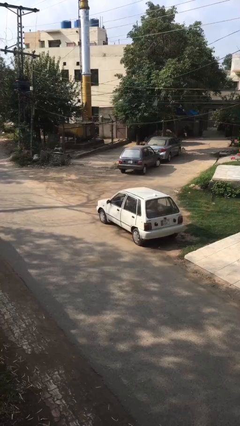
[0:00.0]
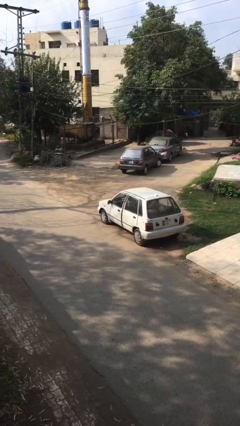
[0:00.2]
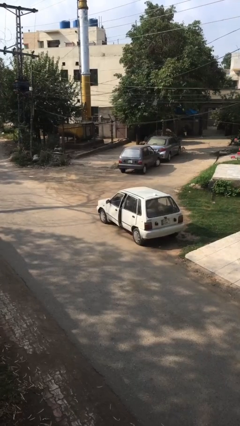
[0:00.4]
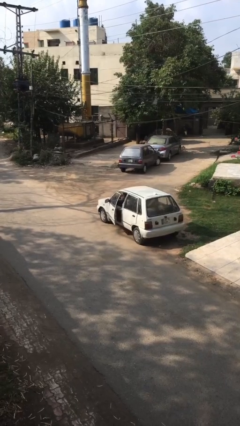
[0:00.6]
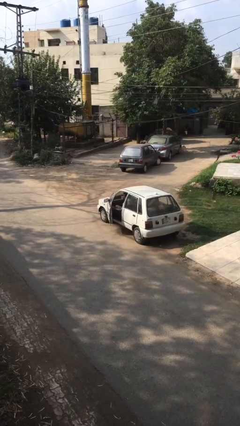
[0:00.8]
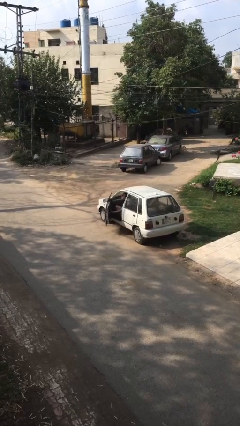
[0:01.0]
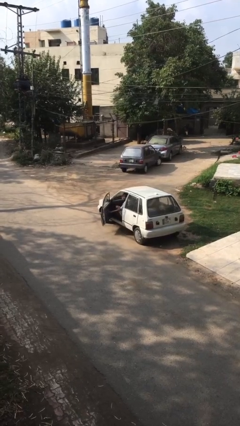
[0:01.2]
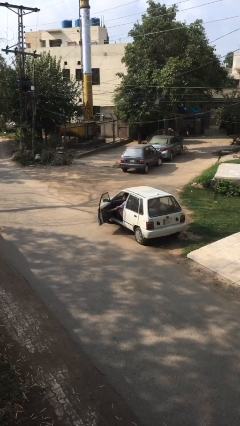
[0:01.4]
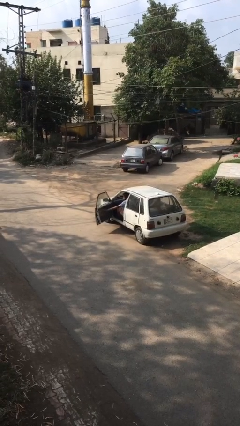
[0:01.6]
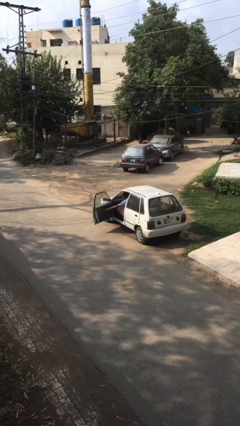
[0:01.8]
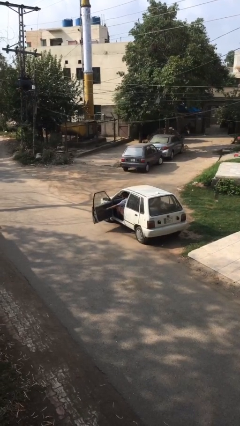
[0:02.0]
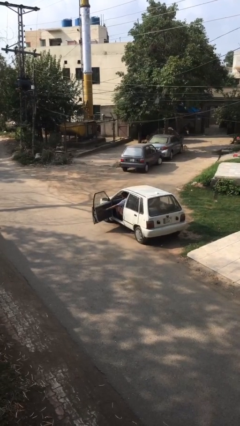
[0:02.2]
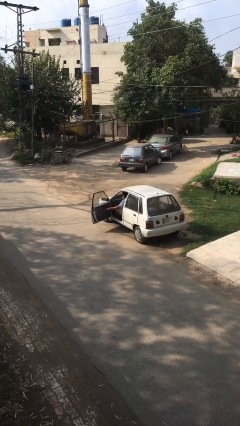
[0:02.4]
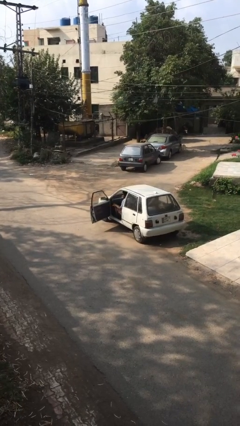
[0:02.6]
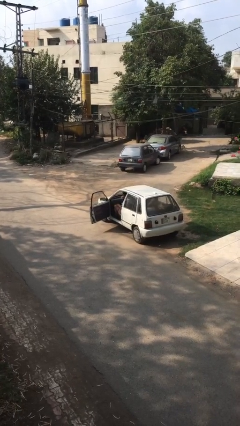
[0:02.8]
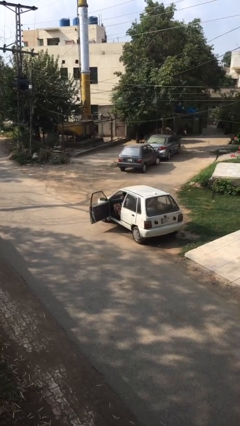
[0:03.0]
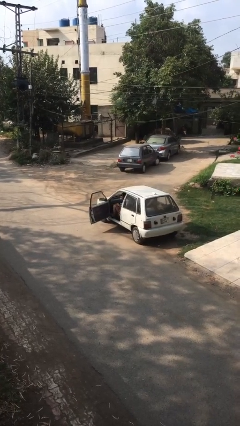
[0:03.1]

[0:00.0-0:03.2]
person opens car door

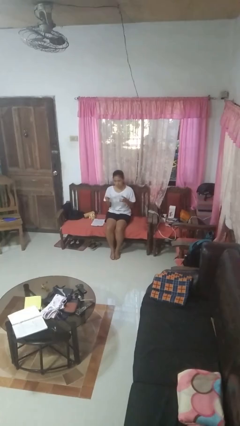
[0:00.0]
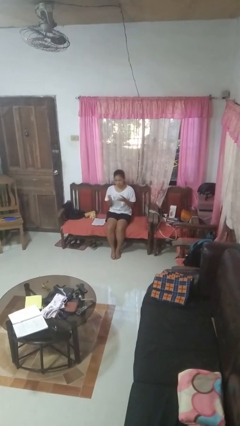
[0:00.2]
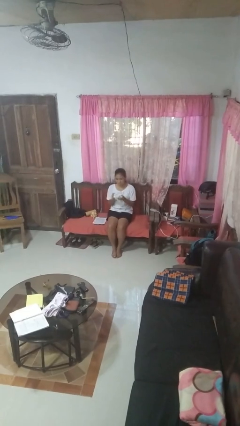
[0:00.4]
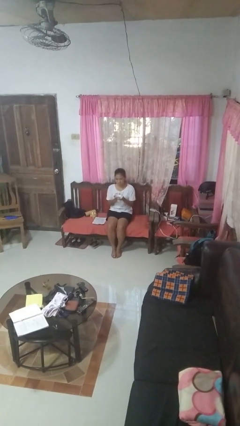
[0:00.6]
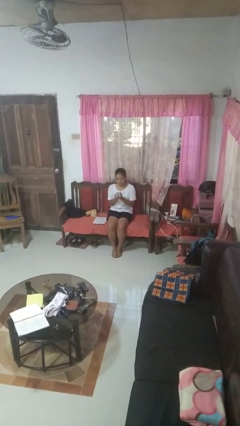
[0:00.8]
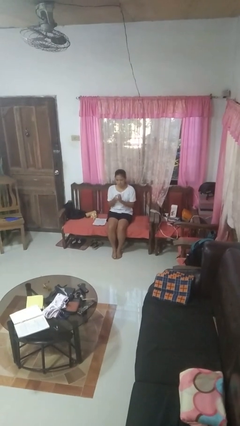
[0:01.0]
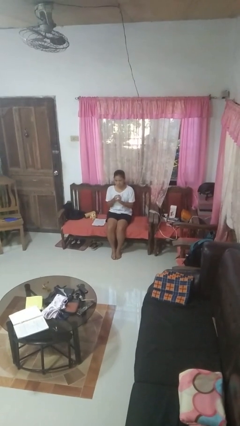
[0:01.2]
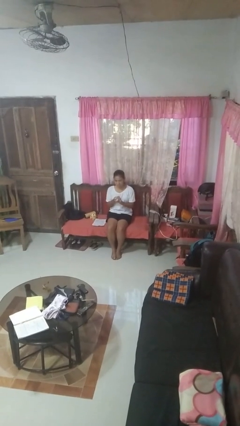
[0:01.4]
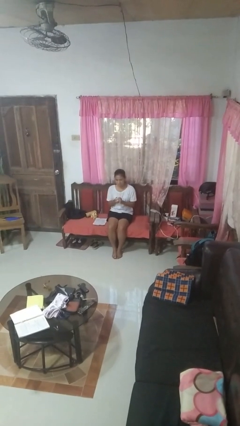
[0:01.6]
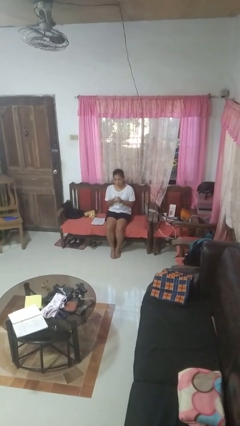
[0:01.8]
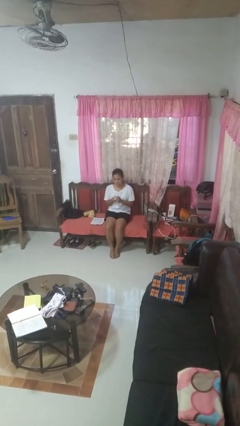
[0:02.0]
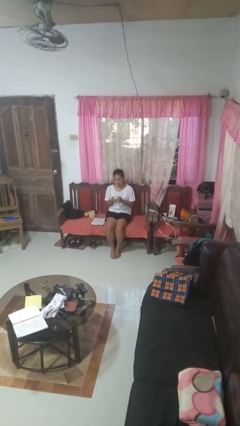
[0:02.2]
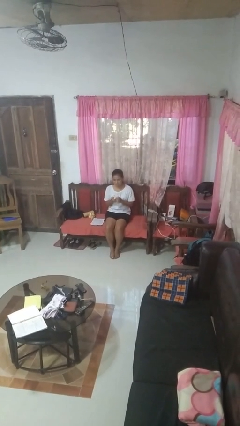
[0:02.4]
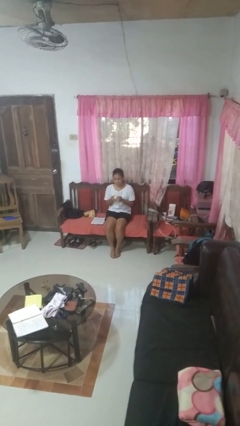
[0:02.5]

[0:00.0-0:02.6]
person crumples paper

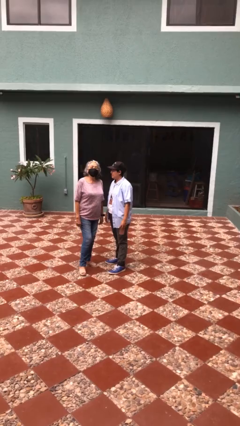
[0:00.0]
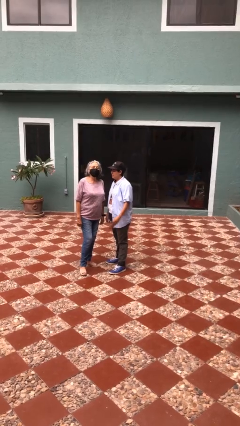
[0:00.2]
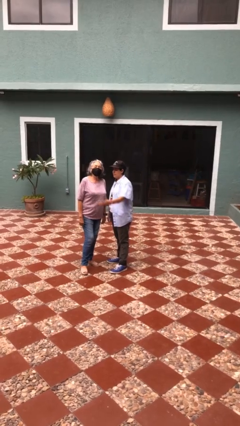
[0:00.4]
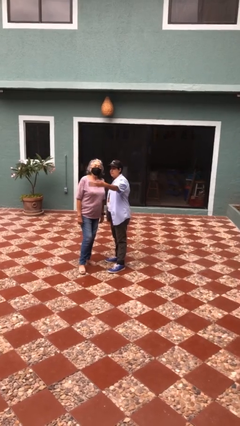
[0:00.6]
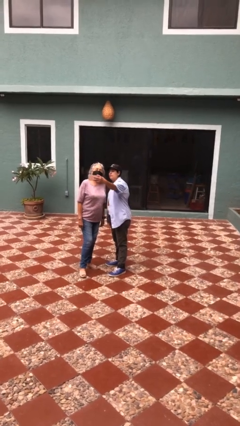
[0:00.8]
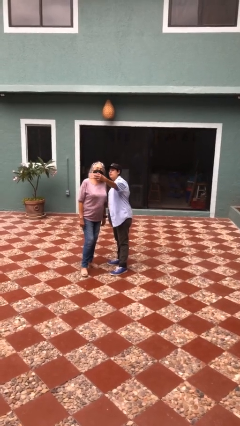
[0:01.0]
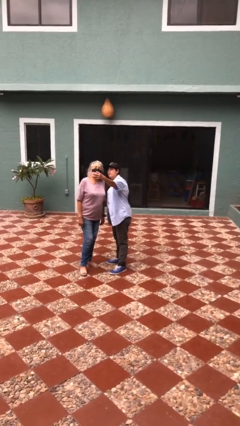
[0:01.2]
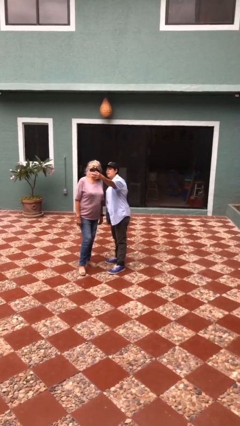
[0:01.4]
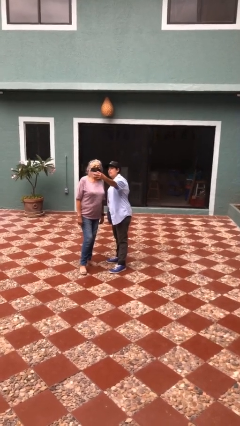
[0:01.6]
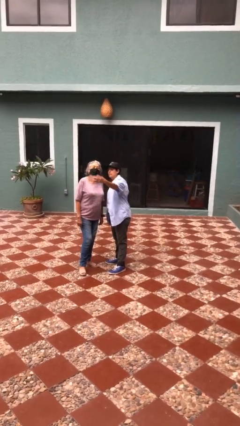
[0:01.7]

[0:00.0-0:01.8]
person takes selfie with person

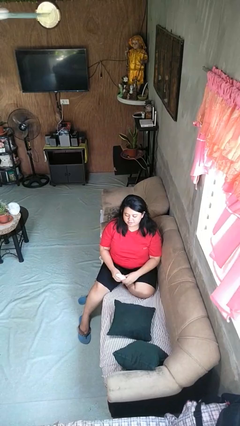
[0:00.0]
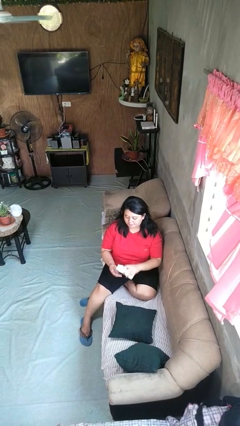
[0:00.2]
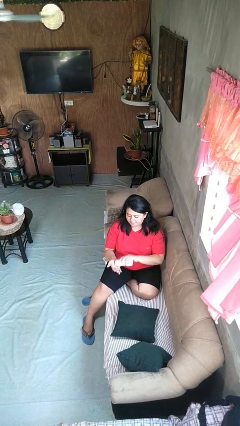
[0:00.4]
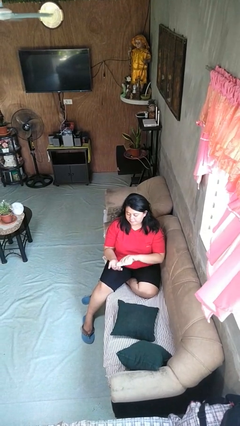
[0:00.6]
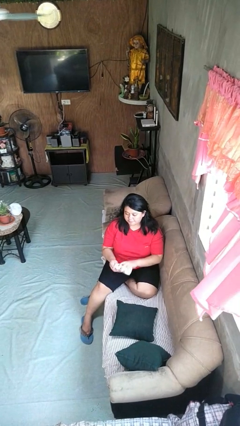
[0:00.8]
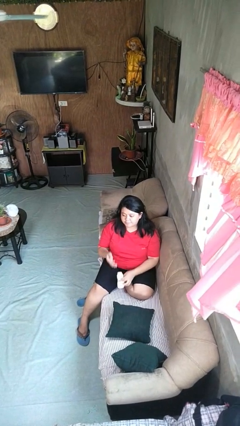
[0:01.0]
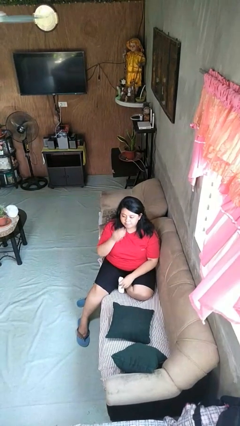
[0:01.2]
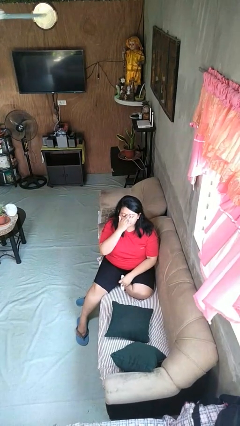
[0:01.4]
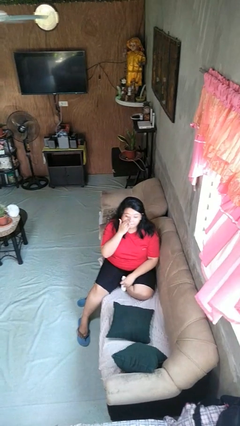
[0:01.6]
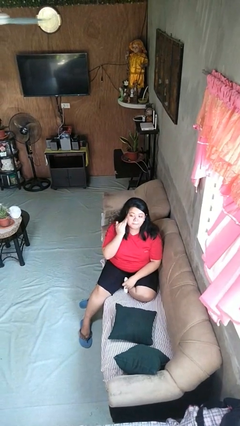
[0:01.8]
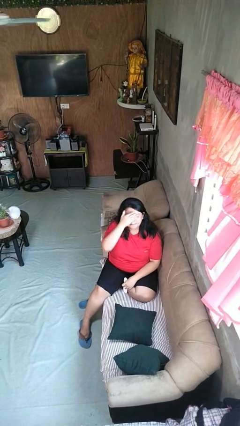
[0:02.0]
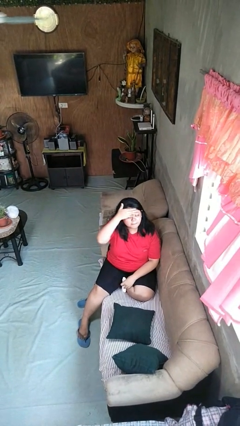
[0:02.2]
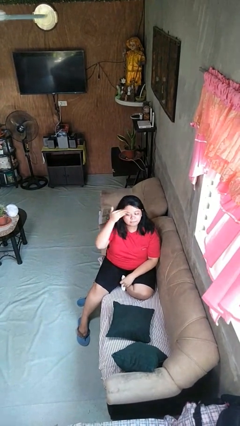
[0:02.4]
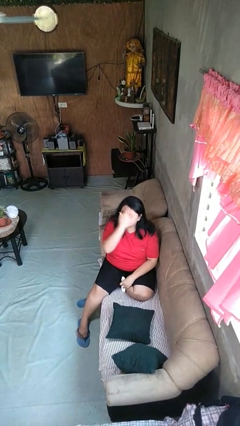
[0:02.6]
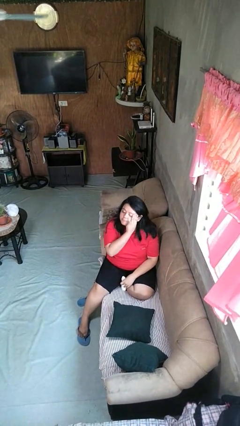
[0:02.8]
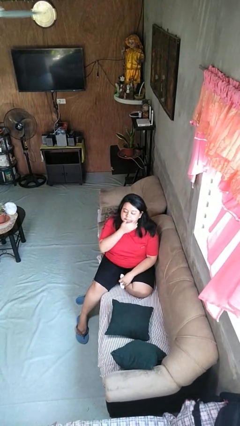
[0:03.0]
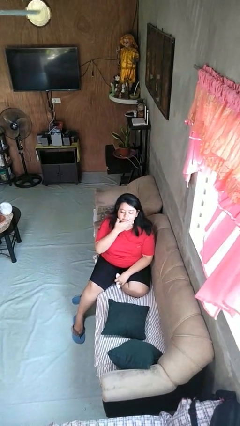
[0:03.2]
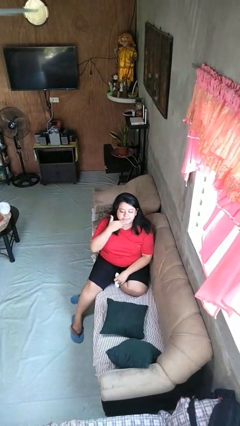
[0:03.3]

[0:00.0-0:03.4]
person applies facial moisturizer

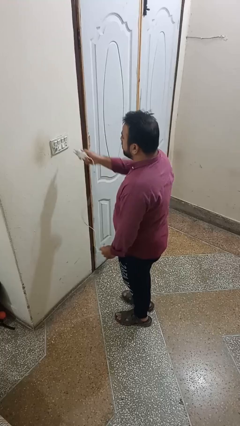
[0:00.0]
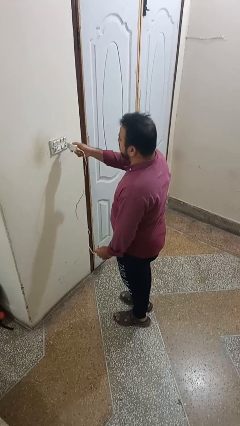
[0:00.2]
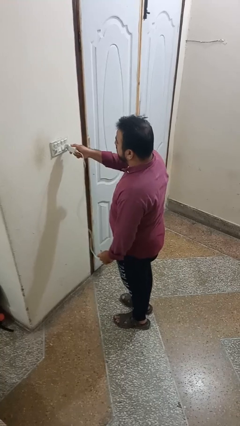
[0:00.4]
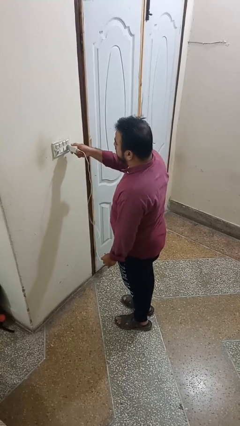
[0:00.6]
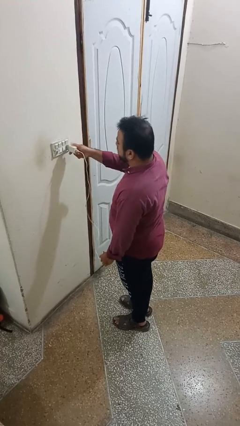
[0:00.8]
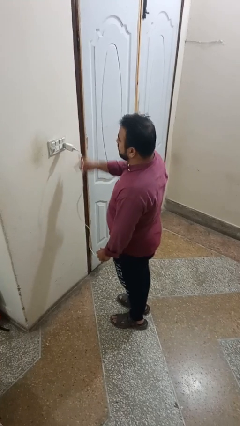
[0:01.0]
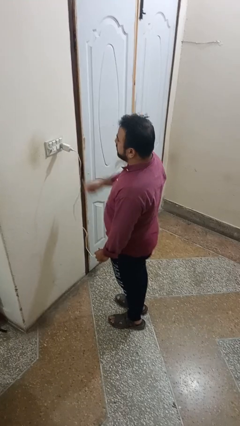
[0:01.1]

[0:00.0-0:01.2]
person plugs into electrical socket

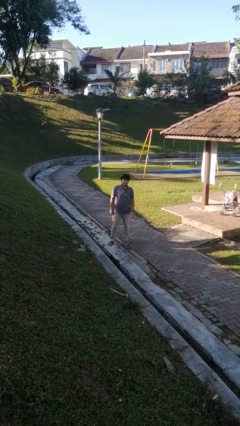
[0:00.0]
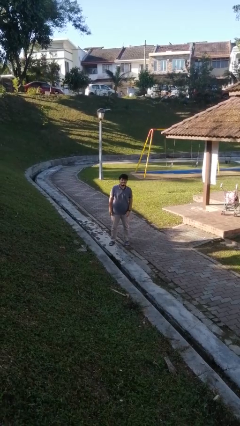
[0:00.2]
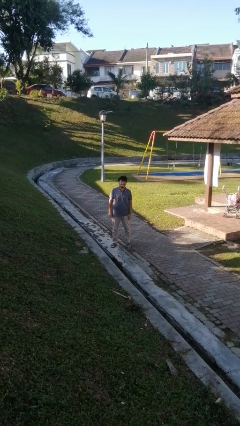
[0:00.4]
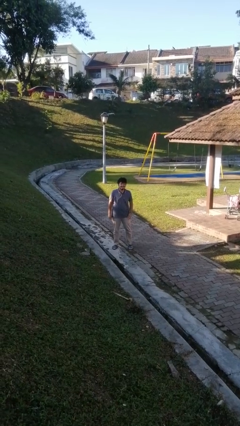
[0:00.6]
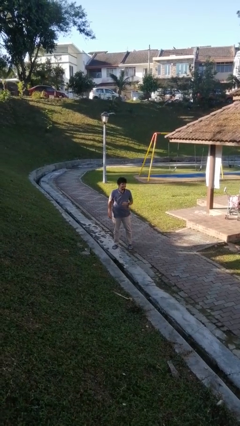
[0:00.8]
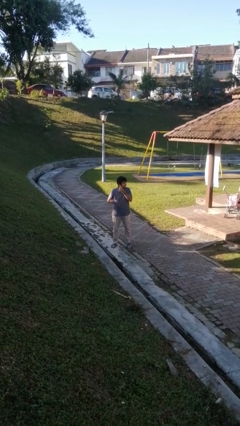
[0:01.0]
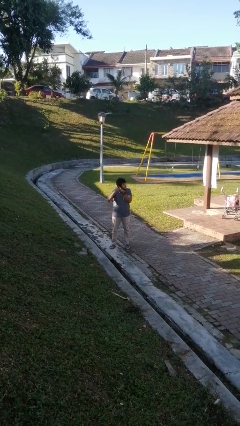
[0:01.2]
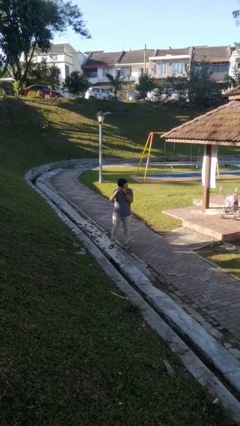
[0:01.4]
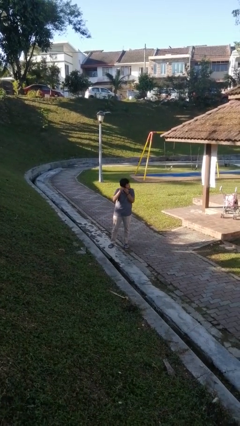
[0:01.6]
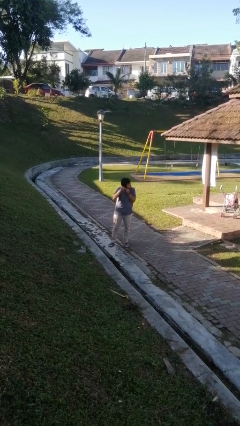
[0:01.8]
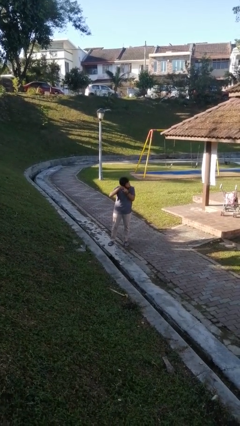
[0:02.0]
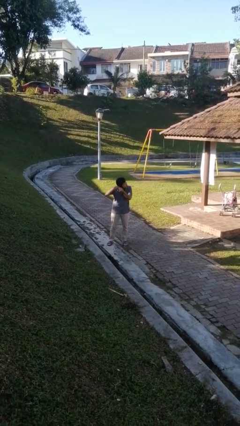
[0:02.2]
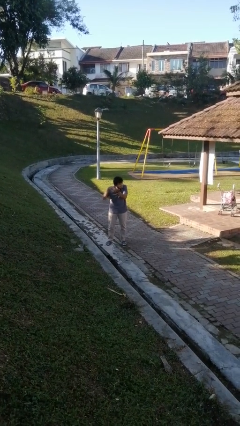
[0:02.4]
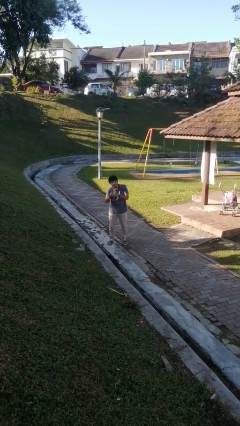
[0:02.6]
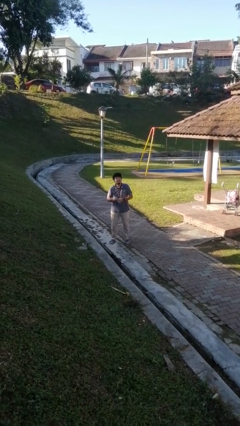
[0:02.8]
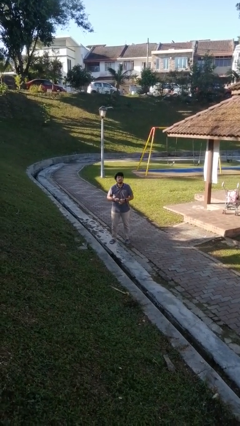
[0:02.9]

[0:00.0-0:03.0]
person takes off earrings

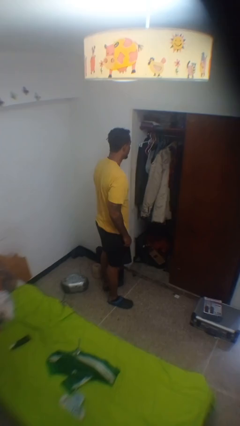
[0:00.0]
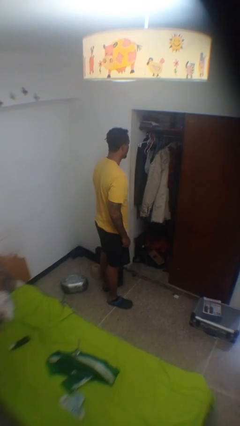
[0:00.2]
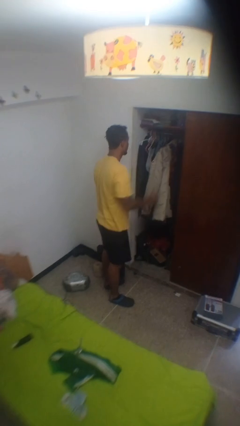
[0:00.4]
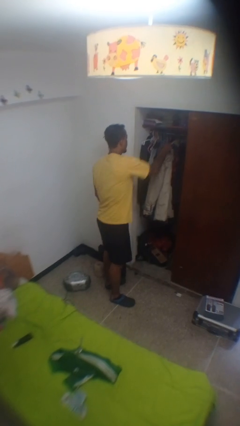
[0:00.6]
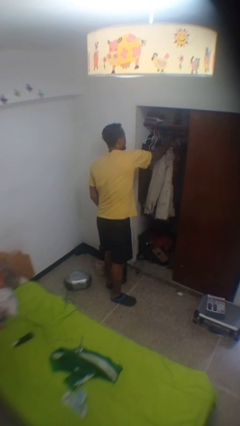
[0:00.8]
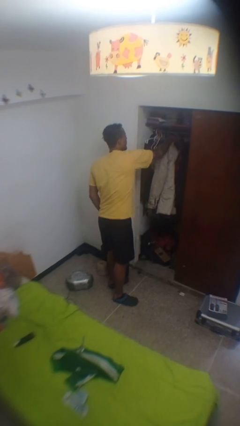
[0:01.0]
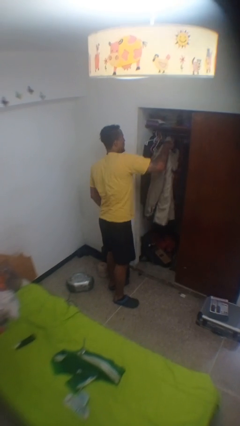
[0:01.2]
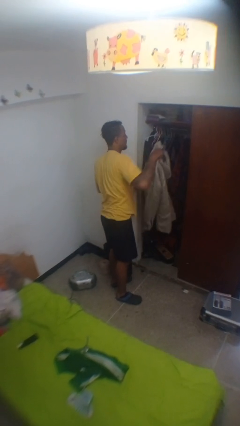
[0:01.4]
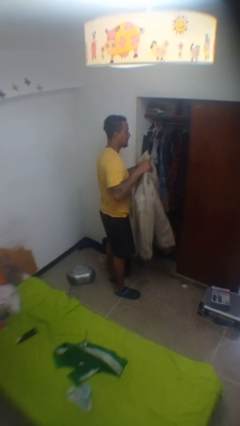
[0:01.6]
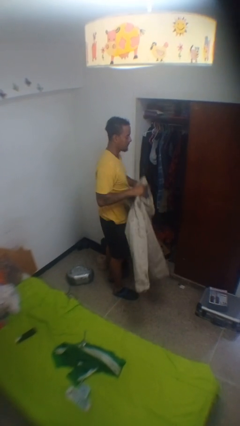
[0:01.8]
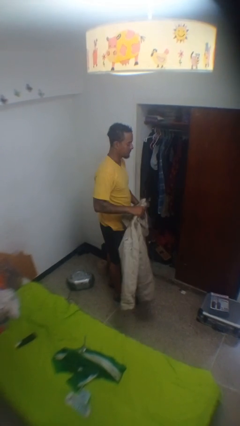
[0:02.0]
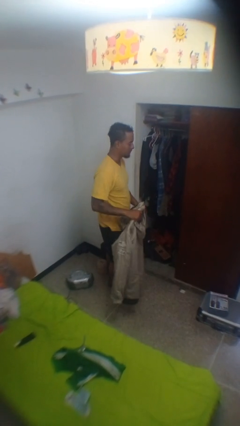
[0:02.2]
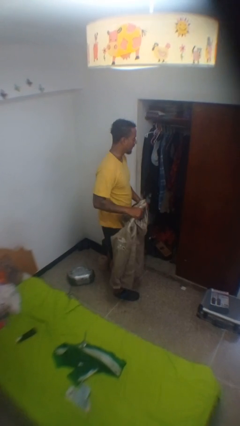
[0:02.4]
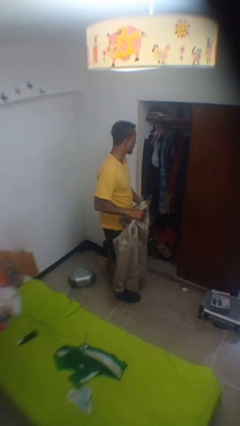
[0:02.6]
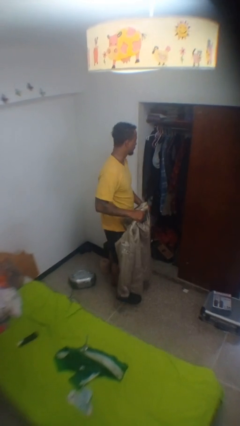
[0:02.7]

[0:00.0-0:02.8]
person takes clothes from closet
